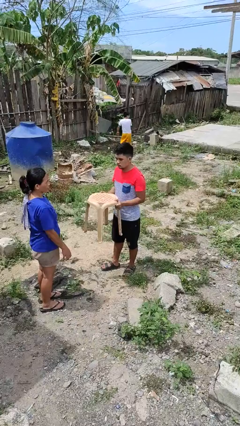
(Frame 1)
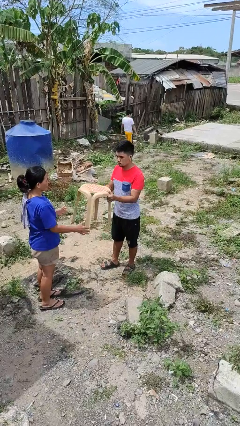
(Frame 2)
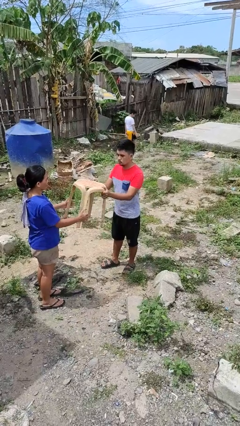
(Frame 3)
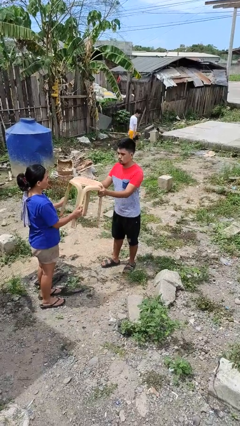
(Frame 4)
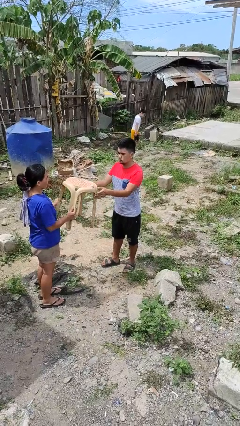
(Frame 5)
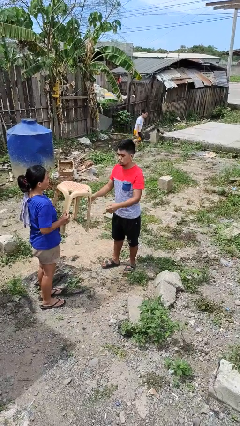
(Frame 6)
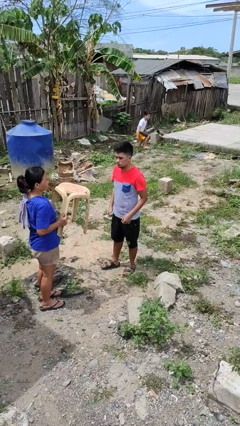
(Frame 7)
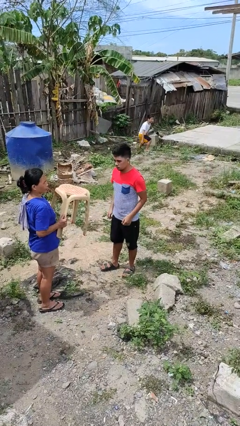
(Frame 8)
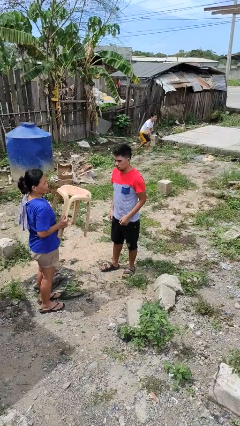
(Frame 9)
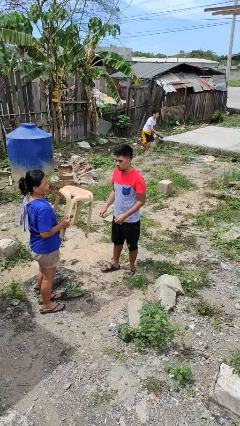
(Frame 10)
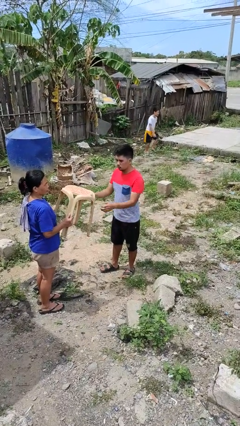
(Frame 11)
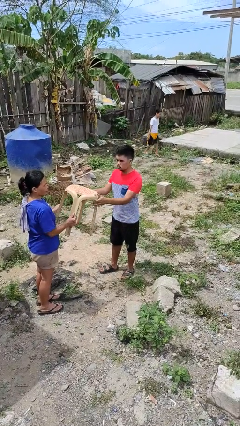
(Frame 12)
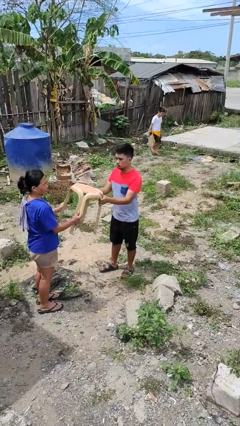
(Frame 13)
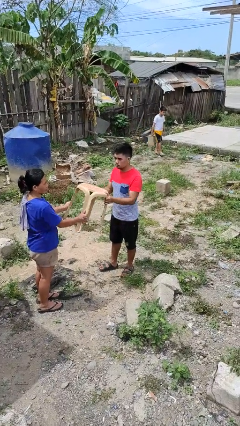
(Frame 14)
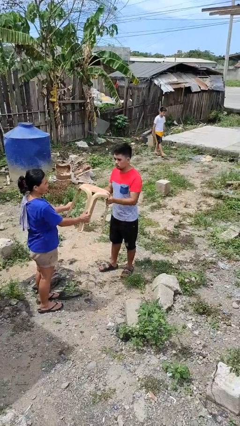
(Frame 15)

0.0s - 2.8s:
person transfers object to person

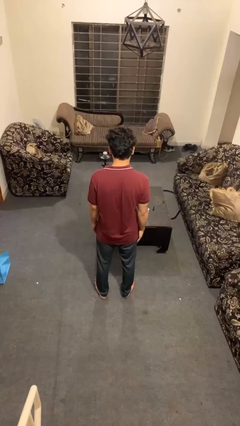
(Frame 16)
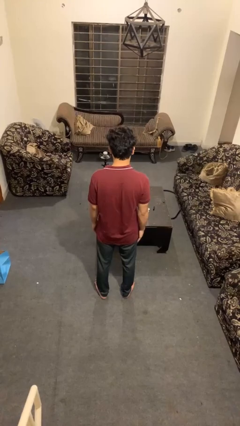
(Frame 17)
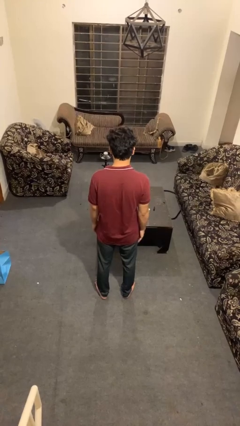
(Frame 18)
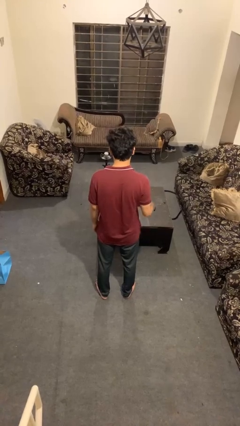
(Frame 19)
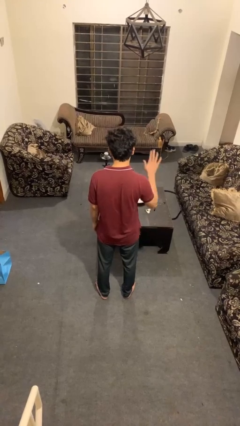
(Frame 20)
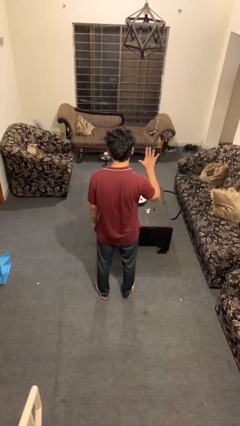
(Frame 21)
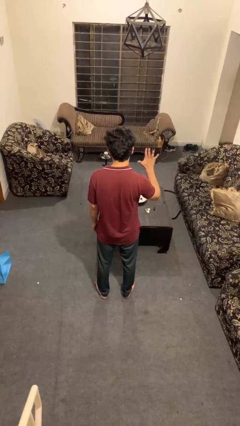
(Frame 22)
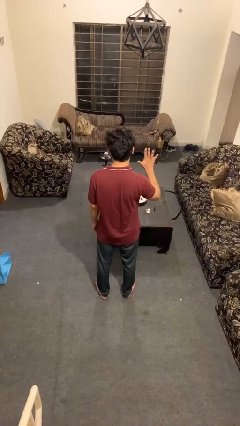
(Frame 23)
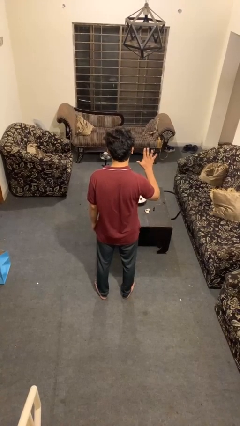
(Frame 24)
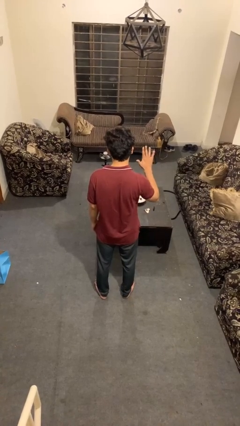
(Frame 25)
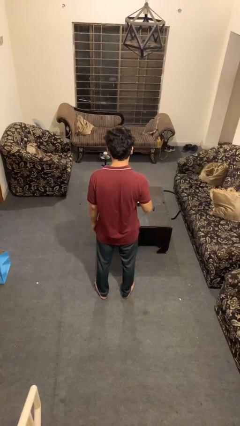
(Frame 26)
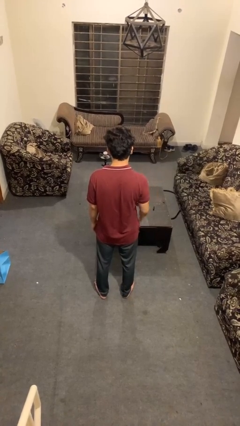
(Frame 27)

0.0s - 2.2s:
person gestures number five

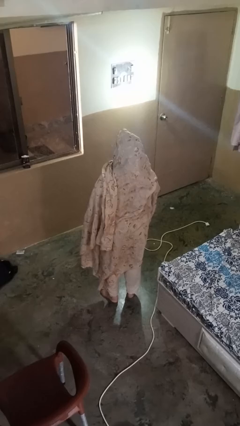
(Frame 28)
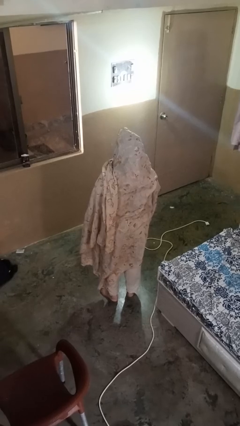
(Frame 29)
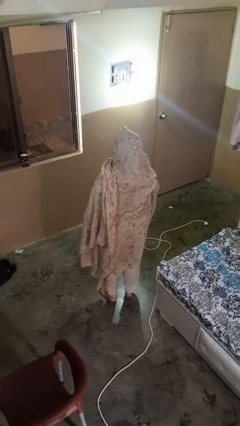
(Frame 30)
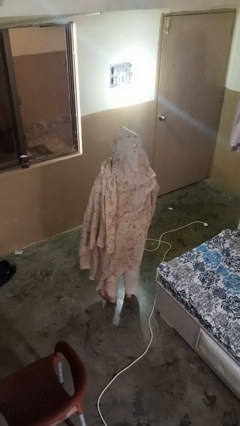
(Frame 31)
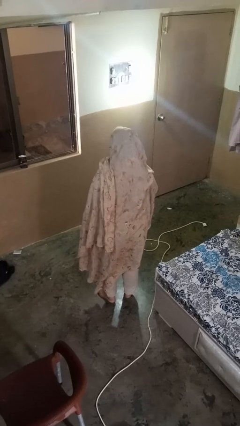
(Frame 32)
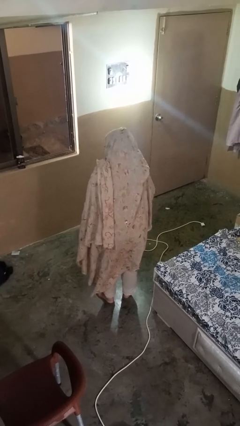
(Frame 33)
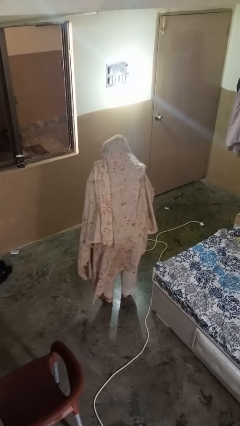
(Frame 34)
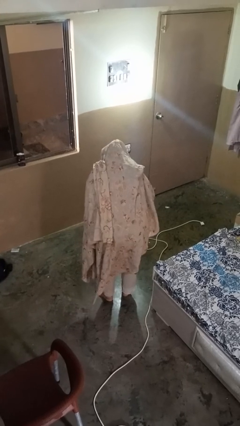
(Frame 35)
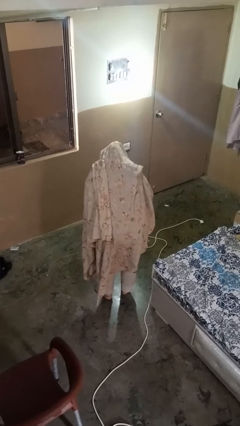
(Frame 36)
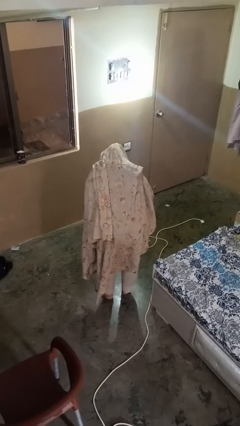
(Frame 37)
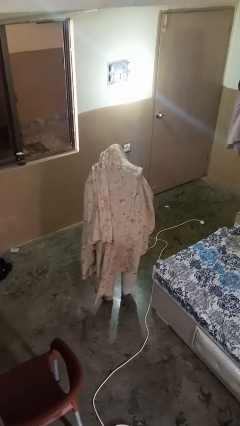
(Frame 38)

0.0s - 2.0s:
person bows

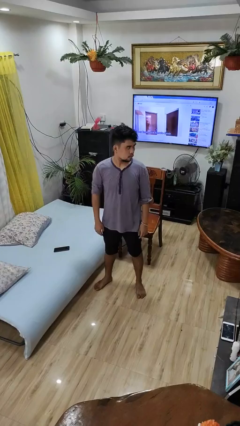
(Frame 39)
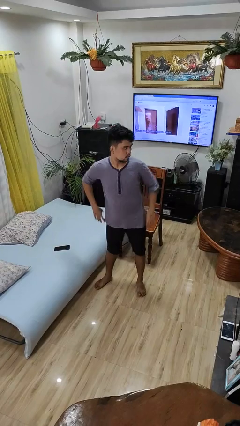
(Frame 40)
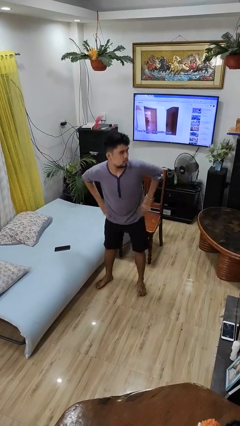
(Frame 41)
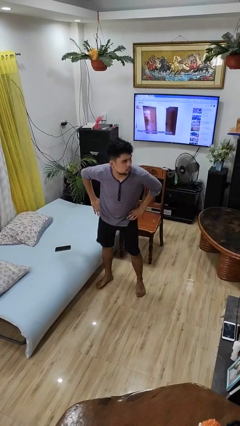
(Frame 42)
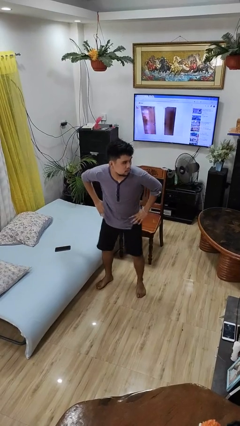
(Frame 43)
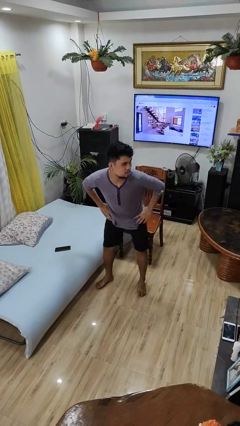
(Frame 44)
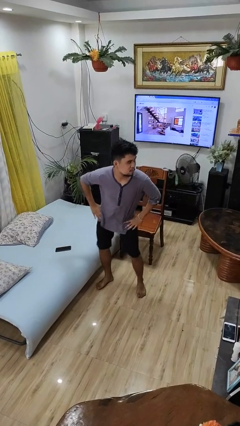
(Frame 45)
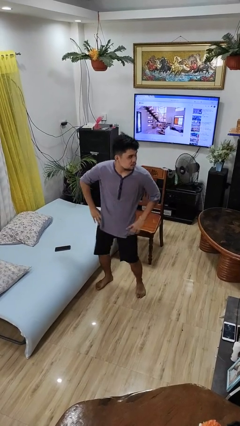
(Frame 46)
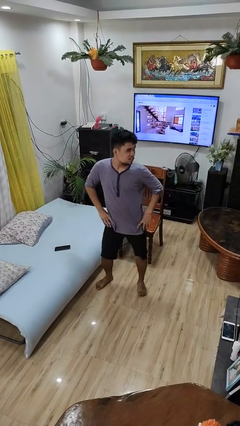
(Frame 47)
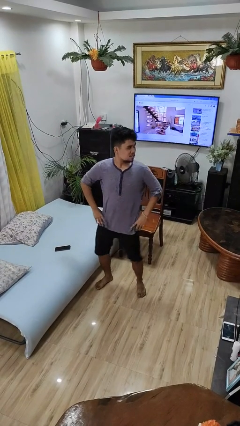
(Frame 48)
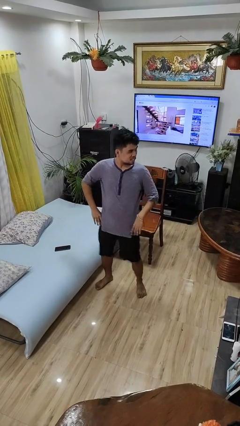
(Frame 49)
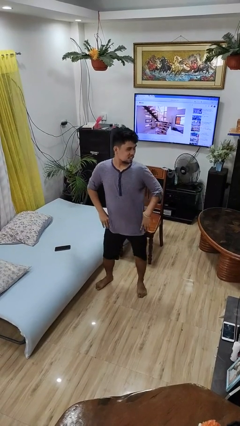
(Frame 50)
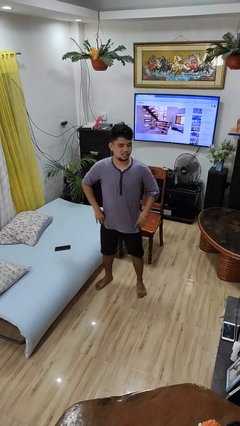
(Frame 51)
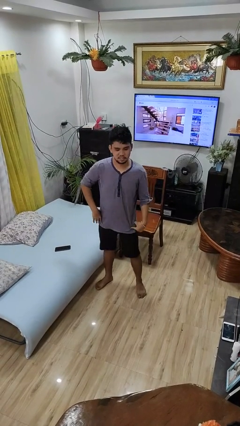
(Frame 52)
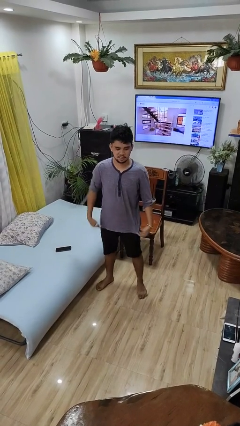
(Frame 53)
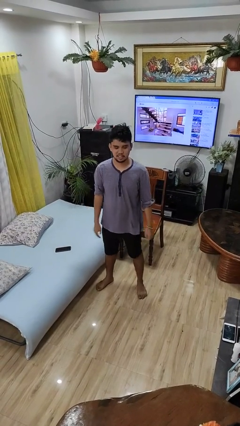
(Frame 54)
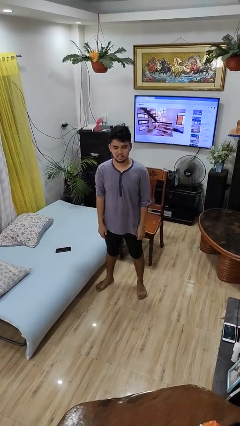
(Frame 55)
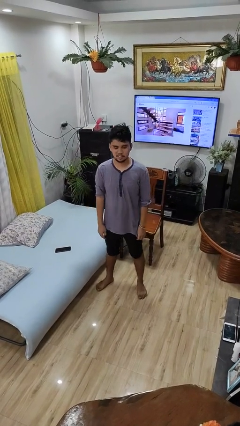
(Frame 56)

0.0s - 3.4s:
person wiggles hips

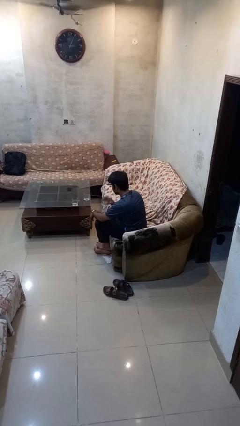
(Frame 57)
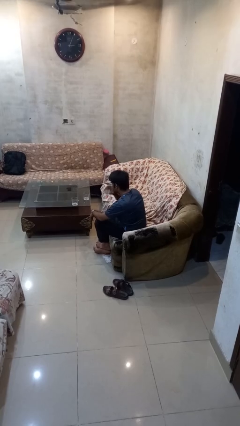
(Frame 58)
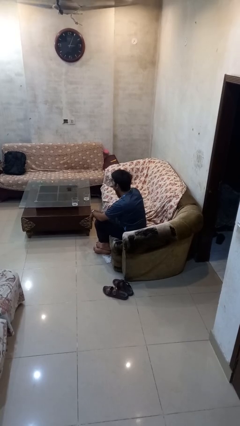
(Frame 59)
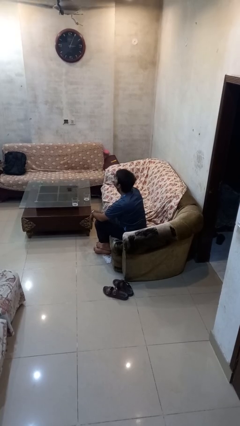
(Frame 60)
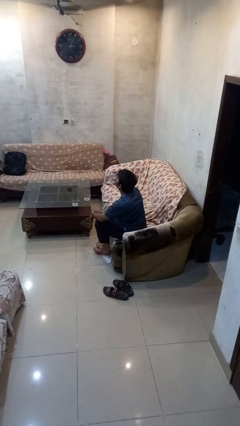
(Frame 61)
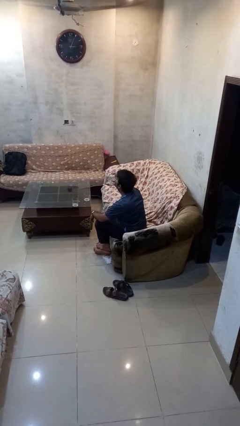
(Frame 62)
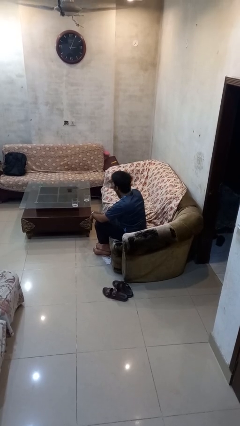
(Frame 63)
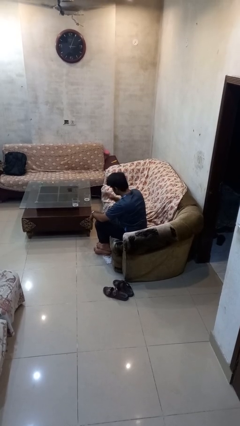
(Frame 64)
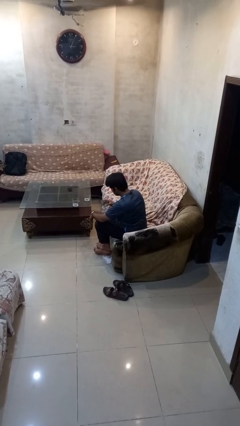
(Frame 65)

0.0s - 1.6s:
person drinks from shotglass

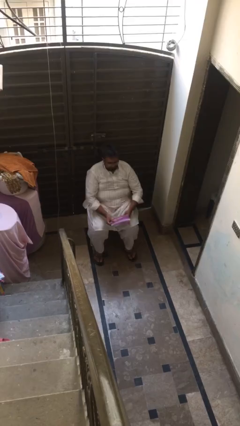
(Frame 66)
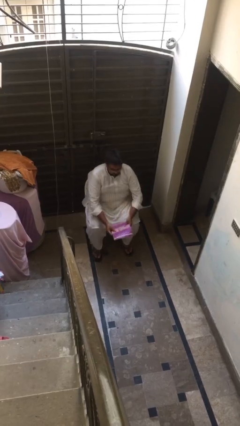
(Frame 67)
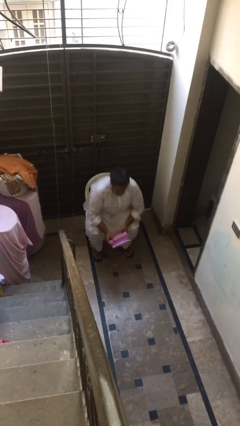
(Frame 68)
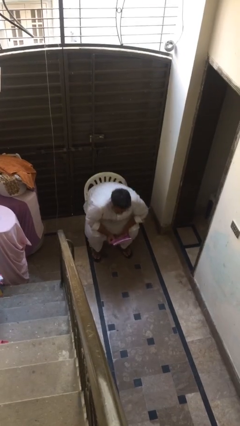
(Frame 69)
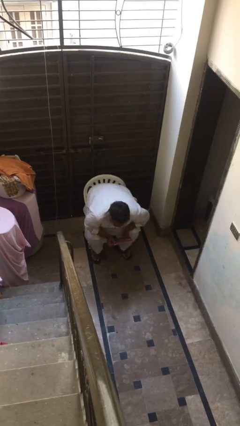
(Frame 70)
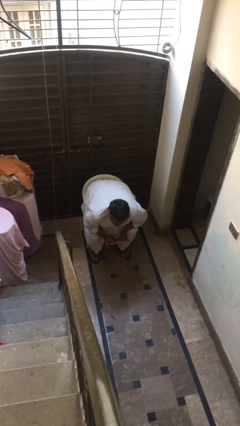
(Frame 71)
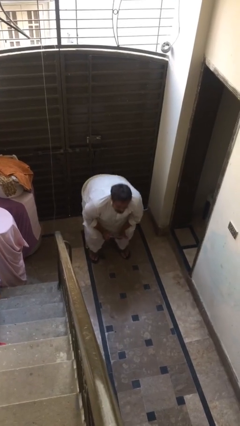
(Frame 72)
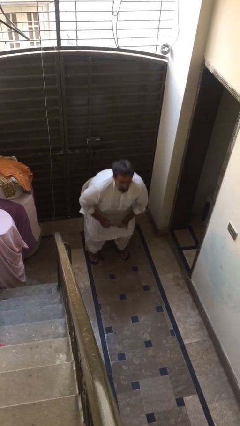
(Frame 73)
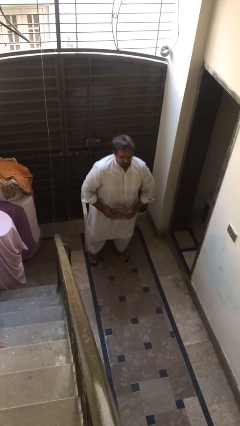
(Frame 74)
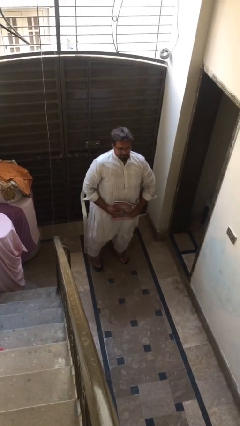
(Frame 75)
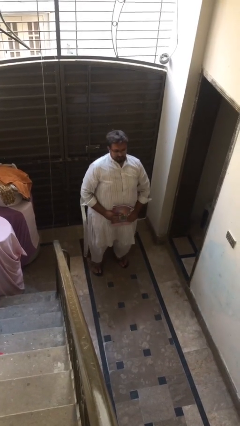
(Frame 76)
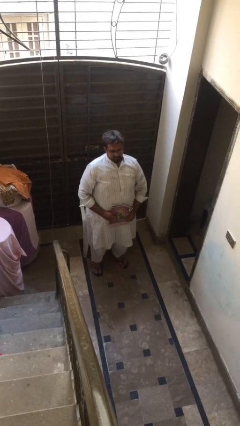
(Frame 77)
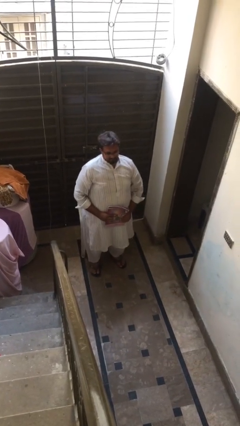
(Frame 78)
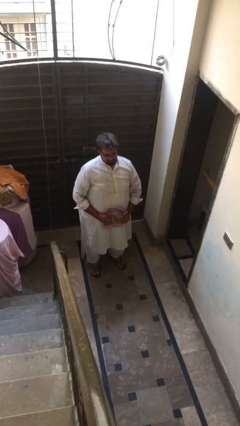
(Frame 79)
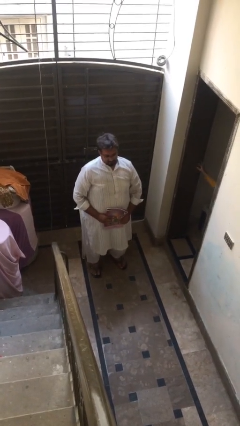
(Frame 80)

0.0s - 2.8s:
person stands up

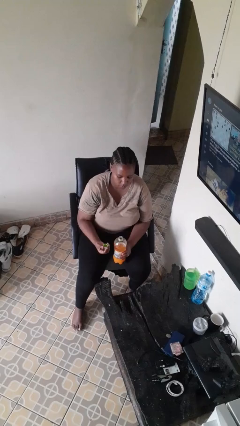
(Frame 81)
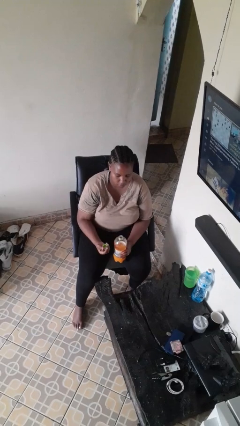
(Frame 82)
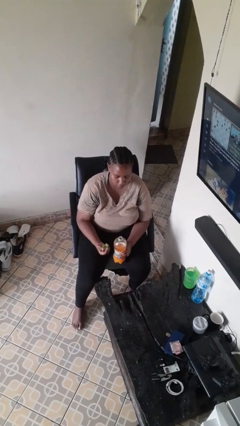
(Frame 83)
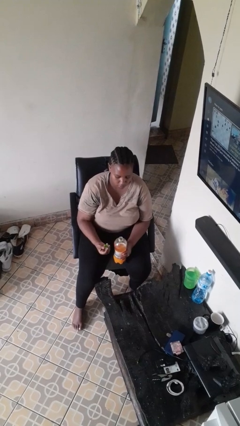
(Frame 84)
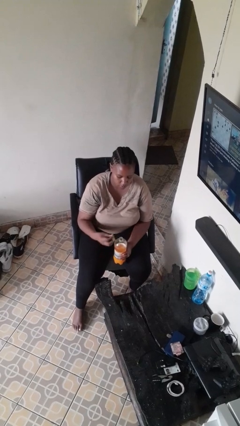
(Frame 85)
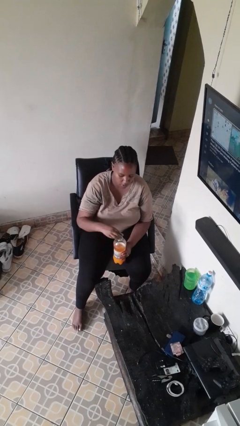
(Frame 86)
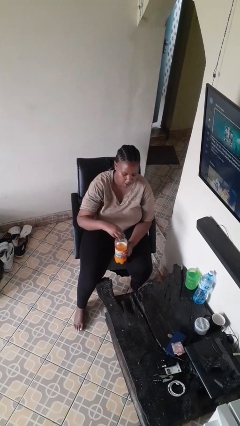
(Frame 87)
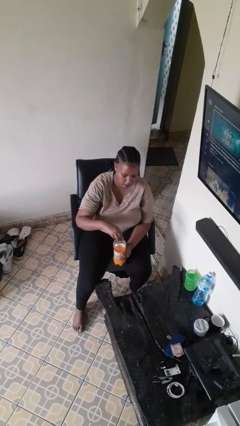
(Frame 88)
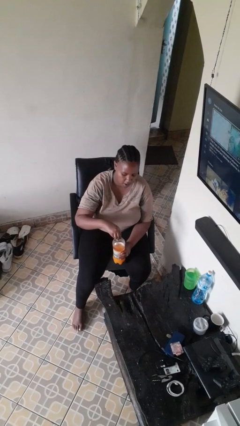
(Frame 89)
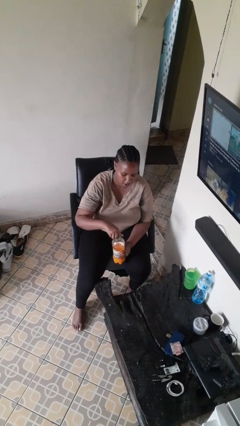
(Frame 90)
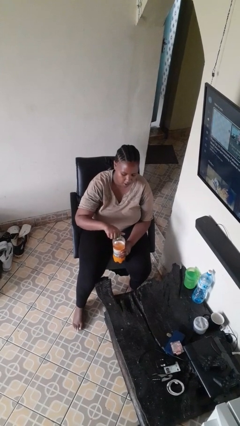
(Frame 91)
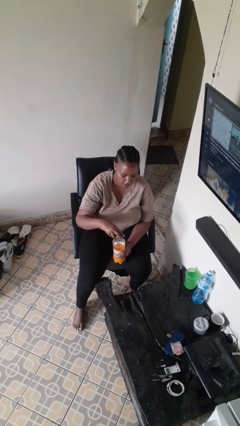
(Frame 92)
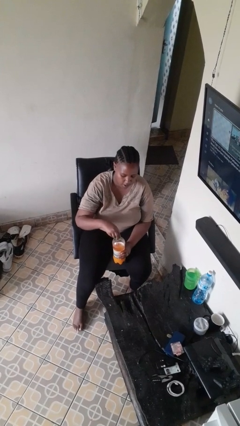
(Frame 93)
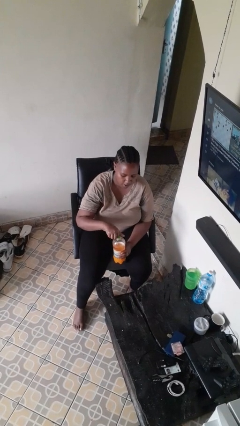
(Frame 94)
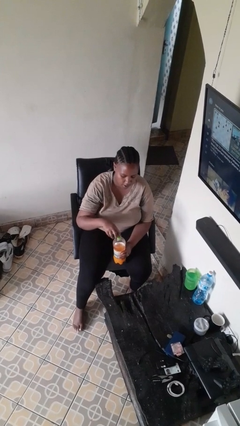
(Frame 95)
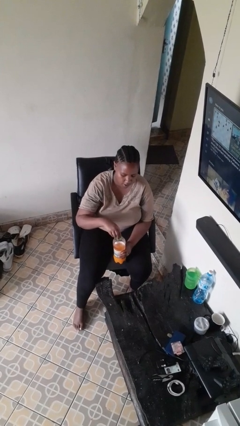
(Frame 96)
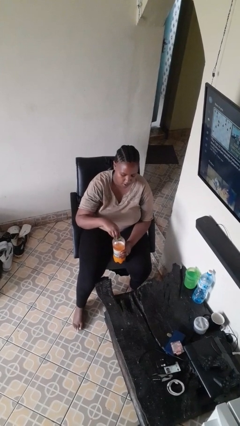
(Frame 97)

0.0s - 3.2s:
person screws lid to bottle
